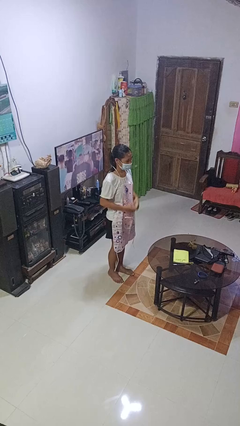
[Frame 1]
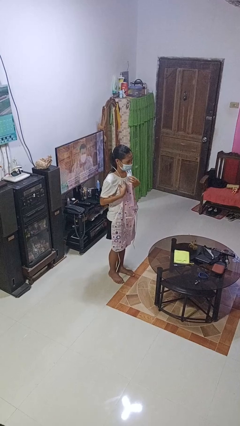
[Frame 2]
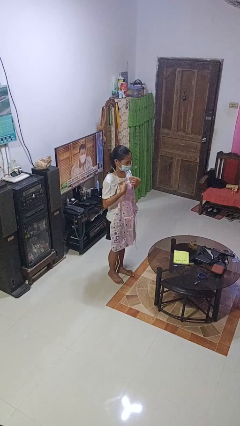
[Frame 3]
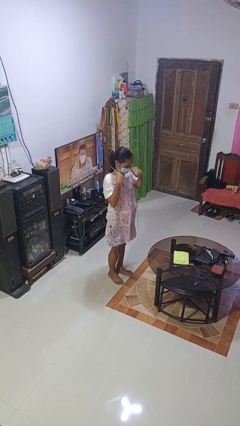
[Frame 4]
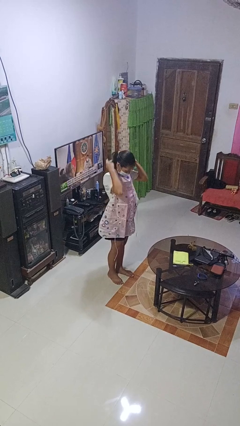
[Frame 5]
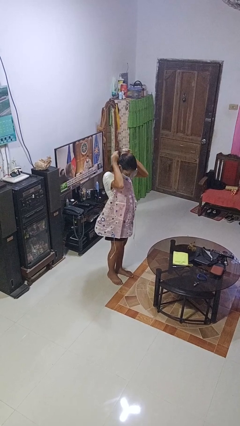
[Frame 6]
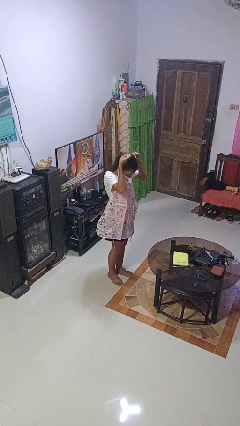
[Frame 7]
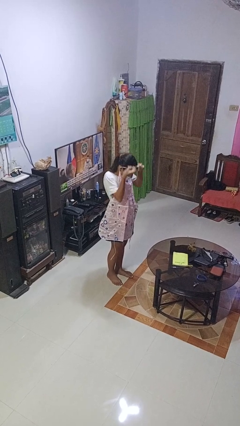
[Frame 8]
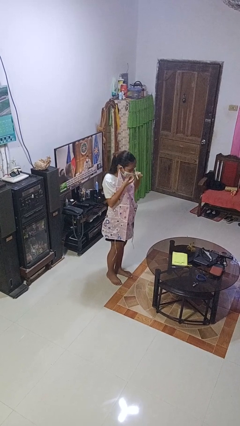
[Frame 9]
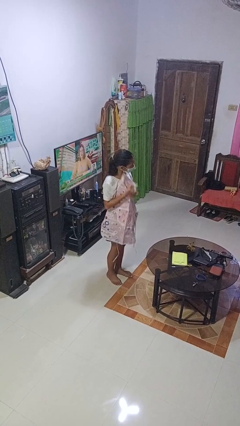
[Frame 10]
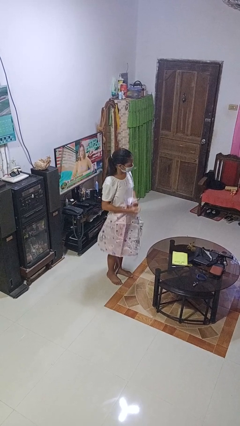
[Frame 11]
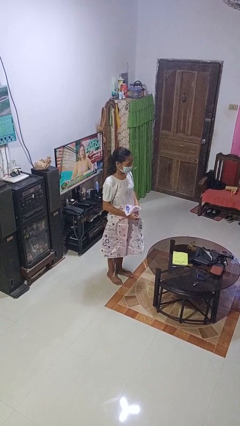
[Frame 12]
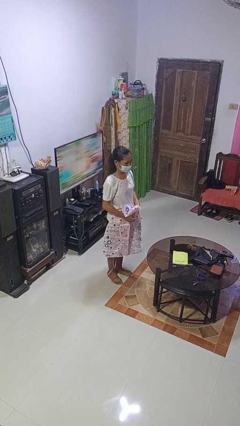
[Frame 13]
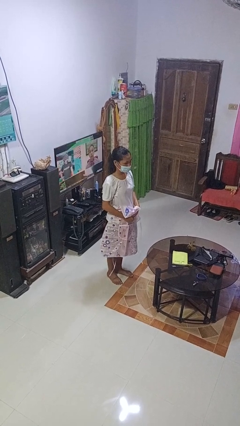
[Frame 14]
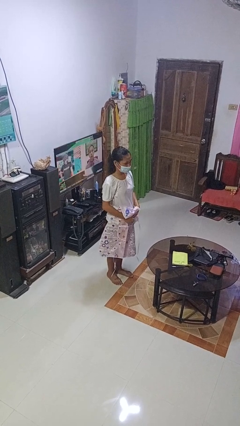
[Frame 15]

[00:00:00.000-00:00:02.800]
person takes off apron

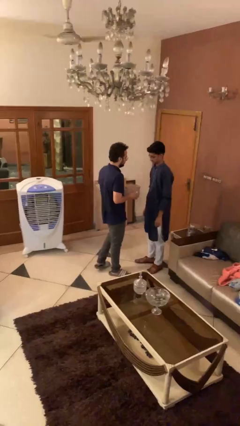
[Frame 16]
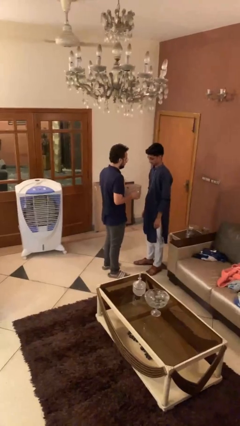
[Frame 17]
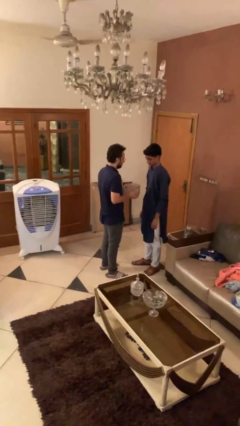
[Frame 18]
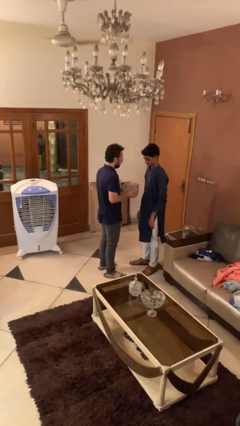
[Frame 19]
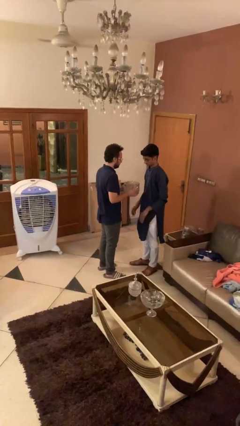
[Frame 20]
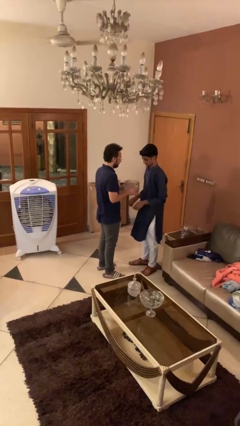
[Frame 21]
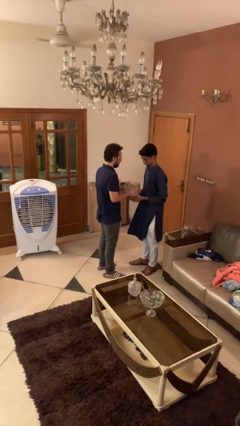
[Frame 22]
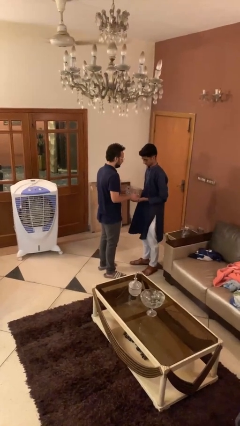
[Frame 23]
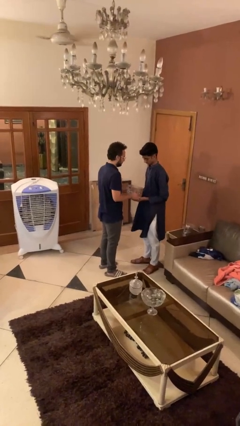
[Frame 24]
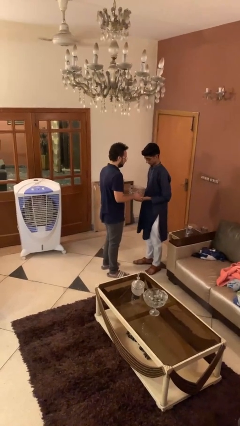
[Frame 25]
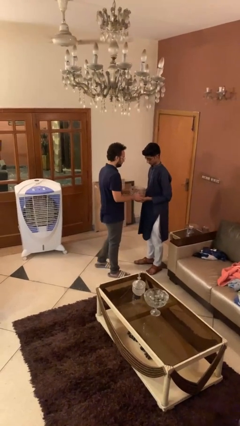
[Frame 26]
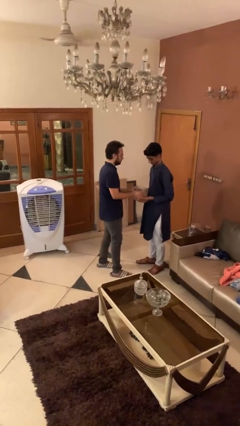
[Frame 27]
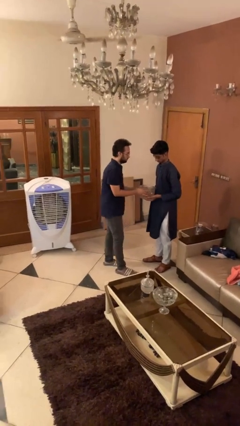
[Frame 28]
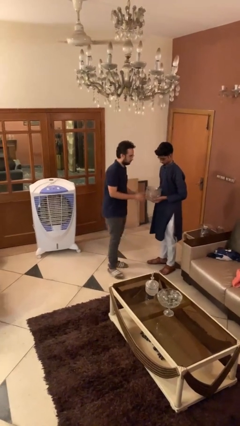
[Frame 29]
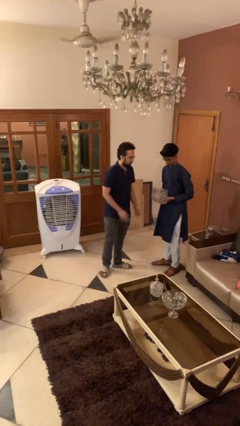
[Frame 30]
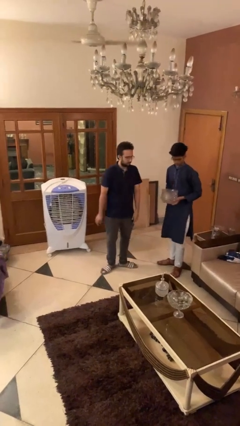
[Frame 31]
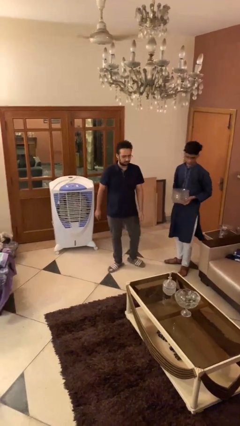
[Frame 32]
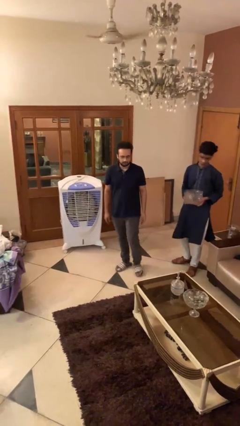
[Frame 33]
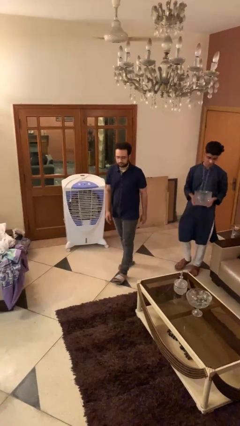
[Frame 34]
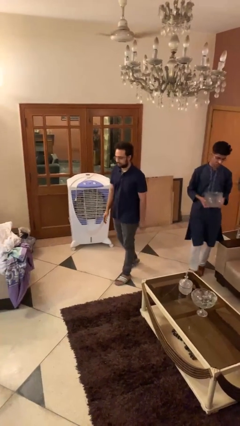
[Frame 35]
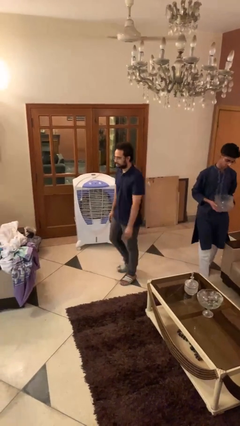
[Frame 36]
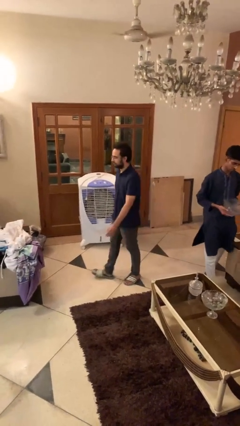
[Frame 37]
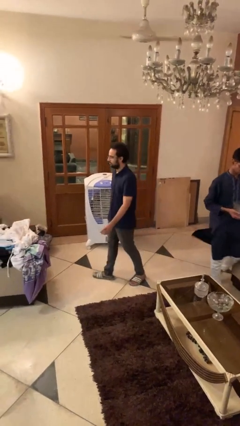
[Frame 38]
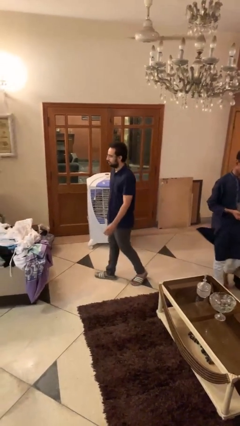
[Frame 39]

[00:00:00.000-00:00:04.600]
person transfers object to person

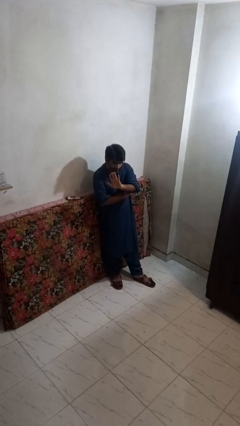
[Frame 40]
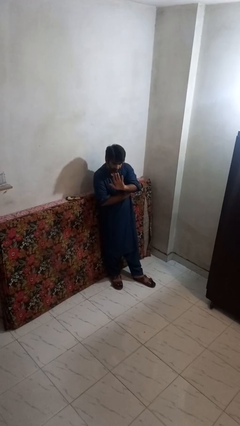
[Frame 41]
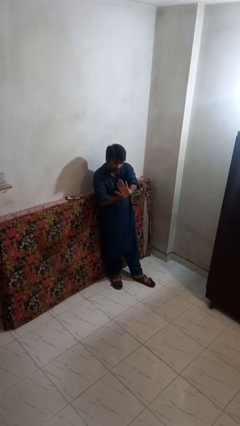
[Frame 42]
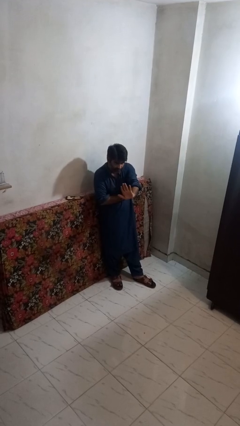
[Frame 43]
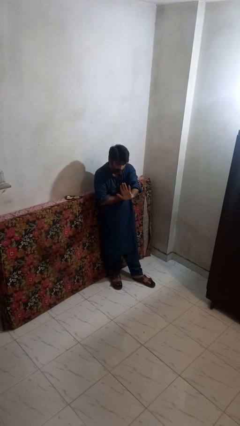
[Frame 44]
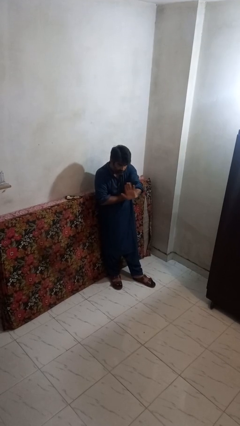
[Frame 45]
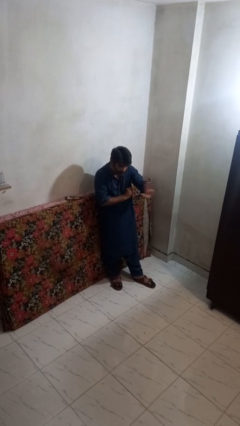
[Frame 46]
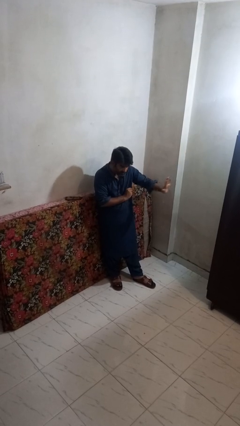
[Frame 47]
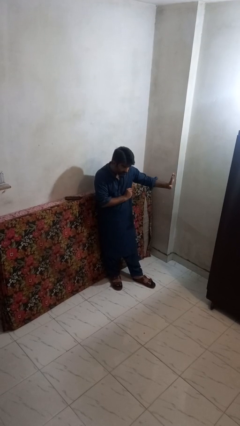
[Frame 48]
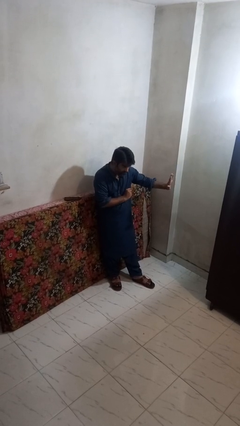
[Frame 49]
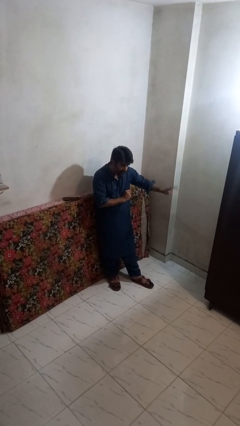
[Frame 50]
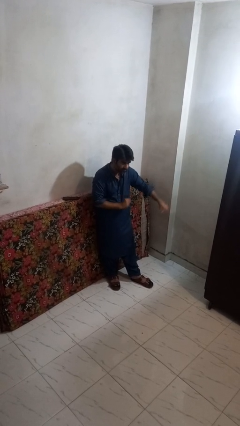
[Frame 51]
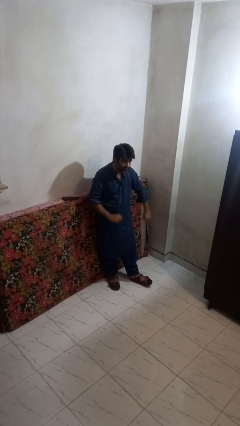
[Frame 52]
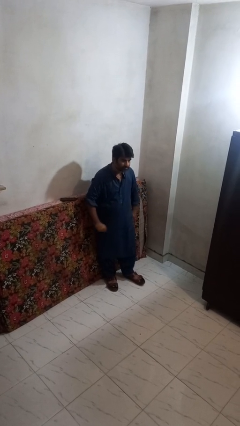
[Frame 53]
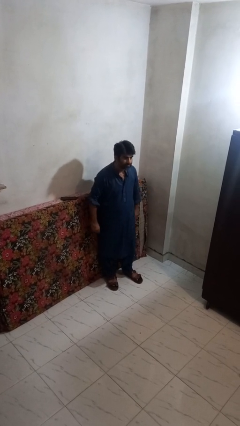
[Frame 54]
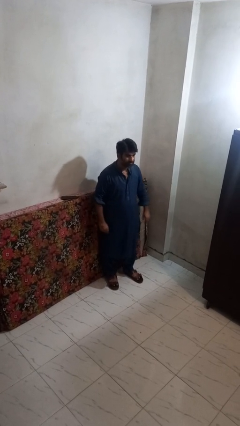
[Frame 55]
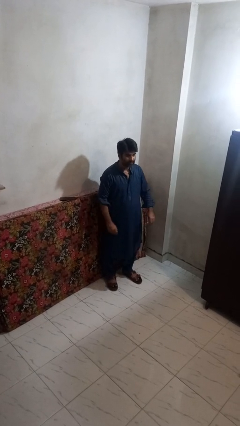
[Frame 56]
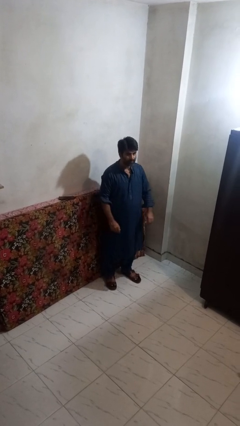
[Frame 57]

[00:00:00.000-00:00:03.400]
person gestures swipe left

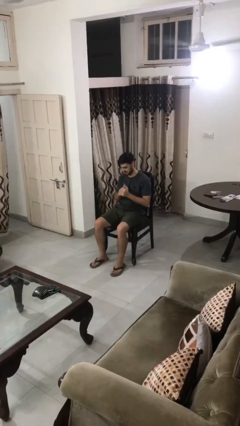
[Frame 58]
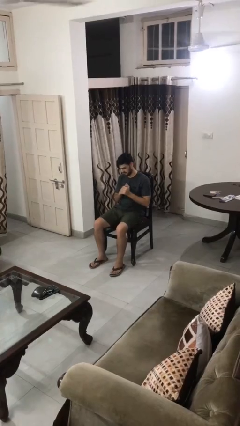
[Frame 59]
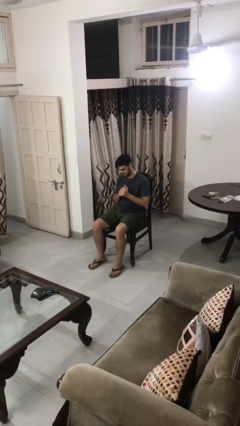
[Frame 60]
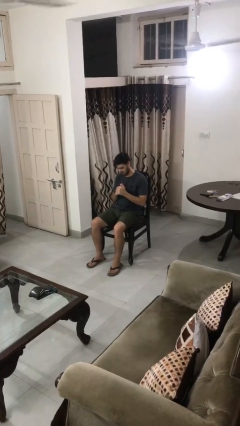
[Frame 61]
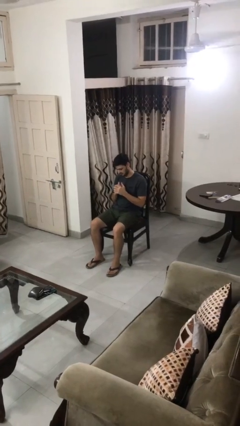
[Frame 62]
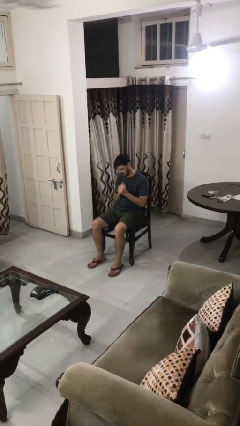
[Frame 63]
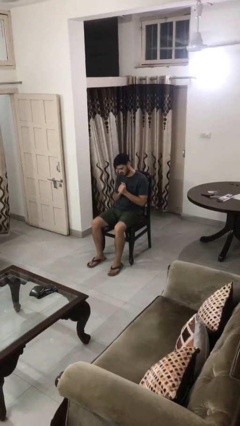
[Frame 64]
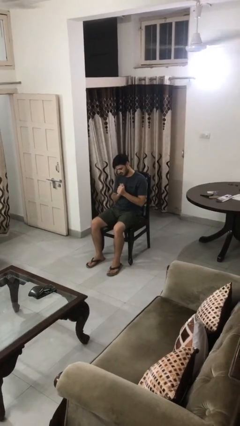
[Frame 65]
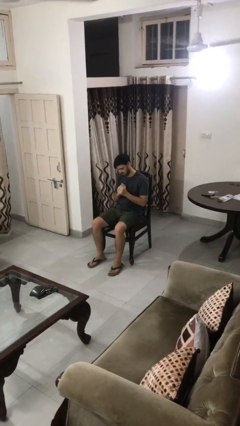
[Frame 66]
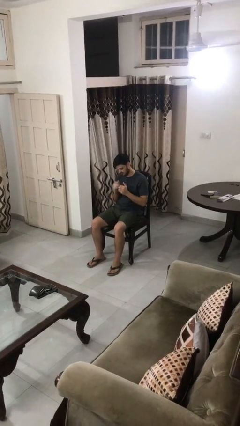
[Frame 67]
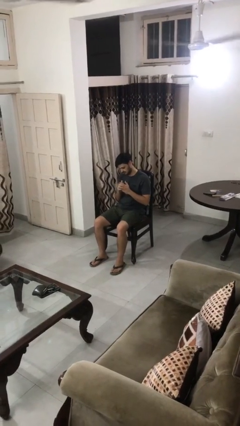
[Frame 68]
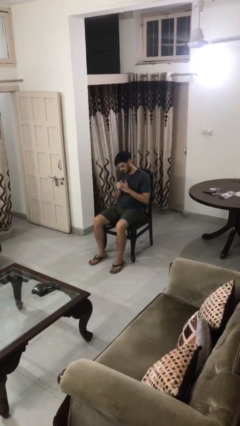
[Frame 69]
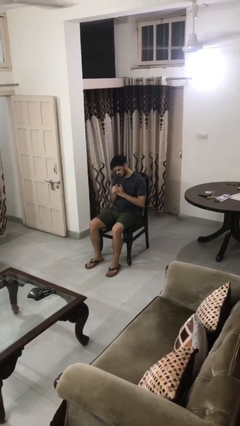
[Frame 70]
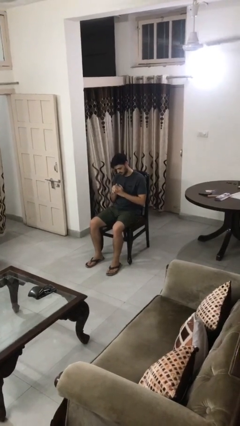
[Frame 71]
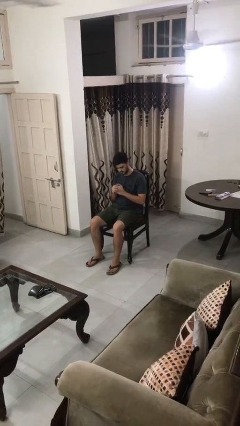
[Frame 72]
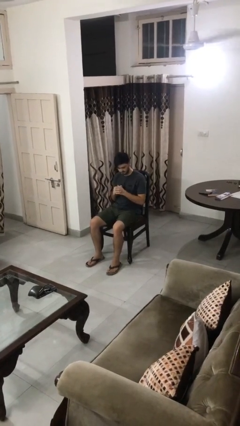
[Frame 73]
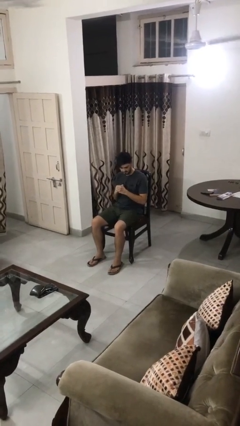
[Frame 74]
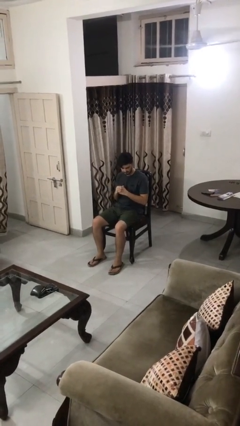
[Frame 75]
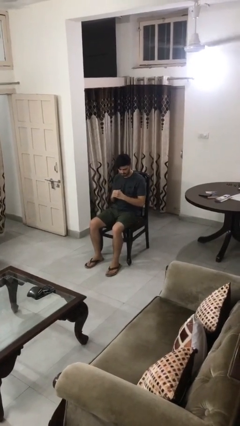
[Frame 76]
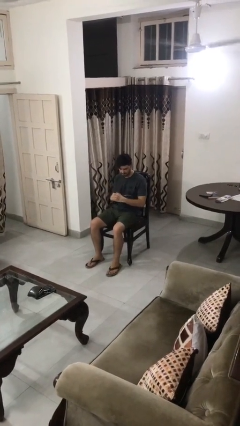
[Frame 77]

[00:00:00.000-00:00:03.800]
person cracks knuckles

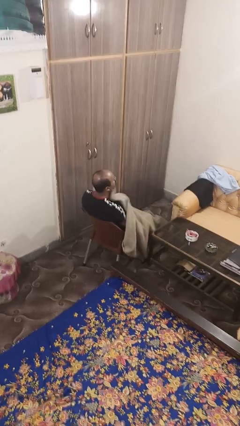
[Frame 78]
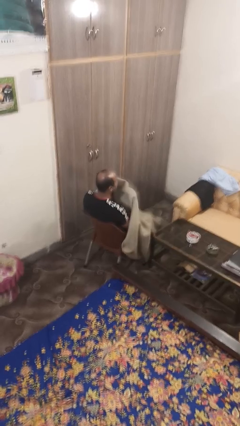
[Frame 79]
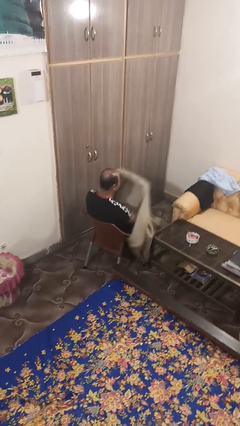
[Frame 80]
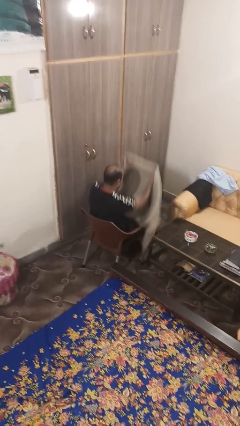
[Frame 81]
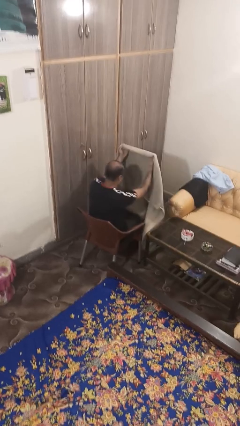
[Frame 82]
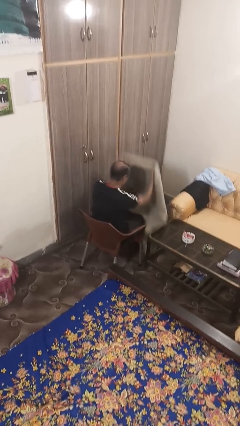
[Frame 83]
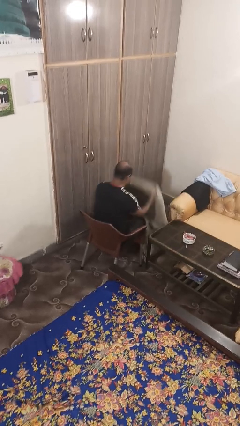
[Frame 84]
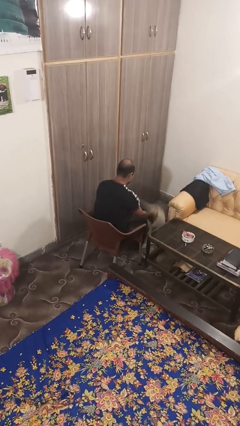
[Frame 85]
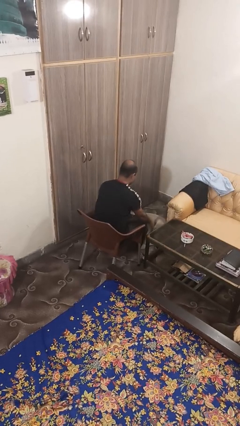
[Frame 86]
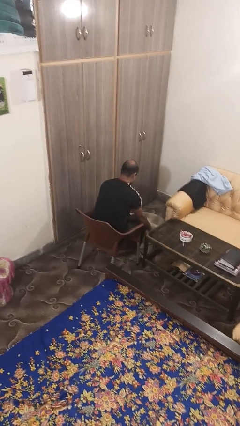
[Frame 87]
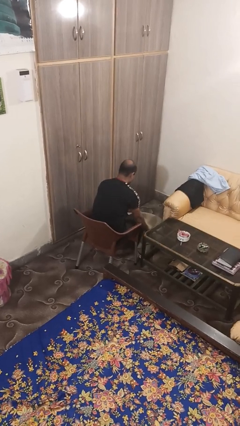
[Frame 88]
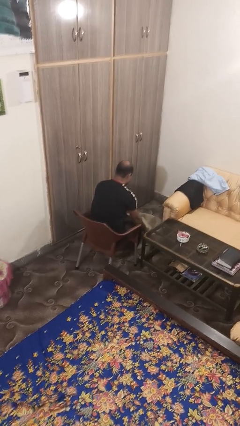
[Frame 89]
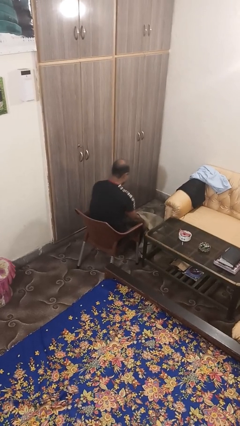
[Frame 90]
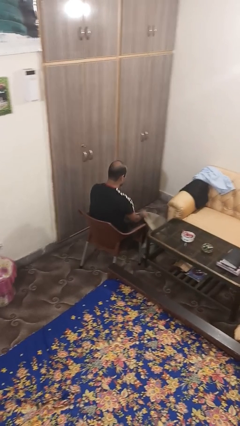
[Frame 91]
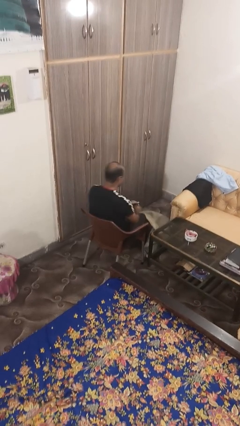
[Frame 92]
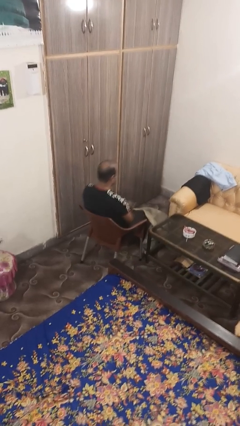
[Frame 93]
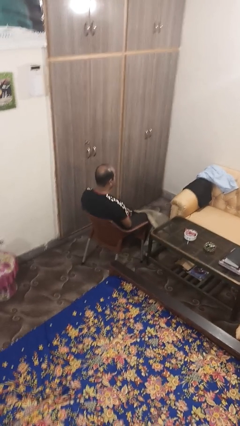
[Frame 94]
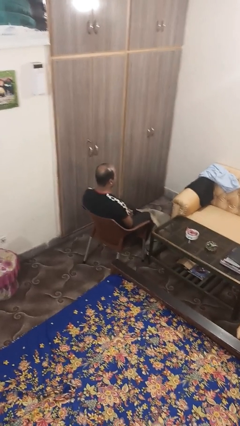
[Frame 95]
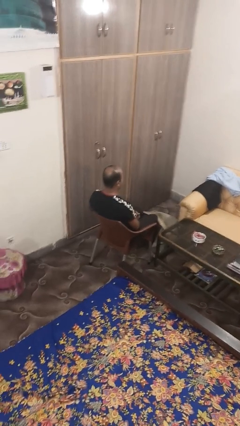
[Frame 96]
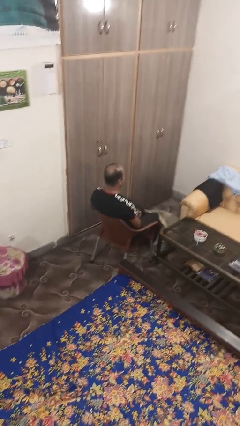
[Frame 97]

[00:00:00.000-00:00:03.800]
person uncovers with blanket
